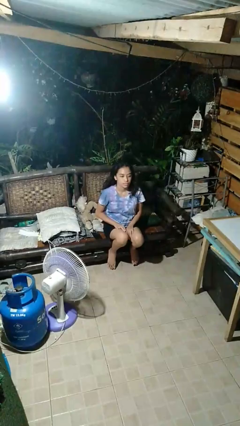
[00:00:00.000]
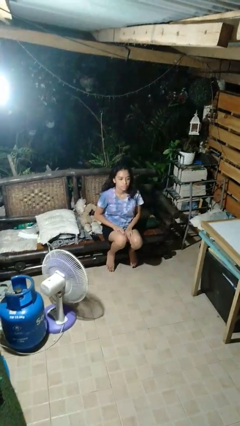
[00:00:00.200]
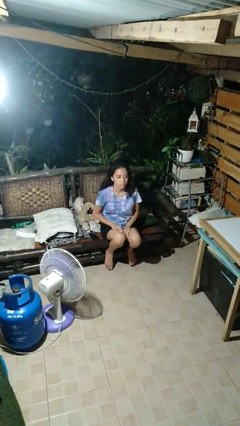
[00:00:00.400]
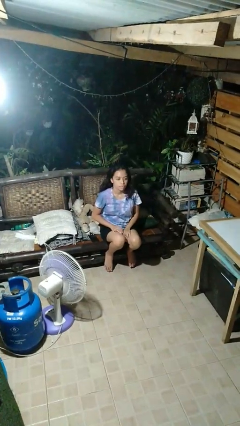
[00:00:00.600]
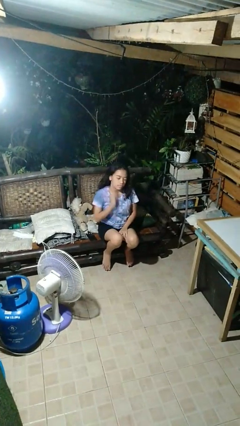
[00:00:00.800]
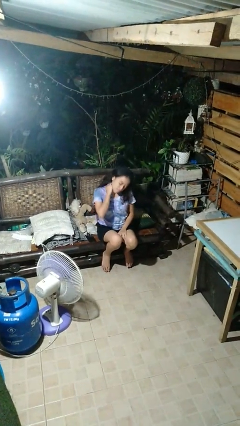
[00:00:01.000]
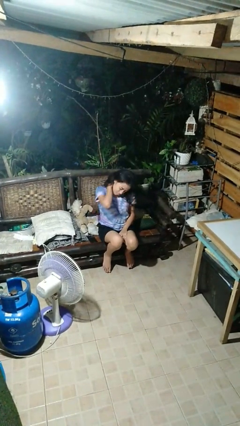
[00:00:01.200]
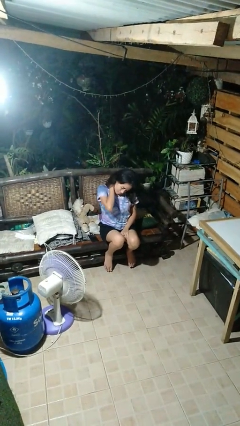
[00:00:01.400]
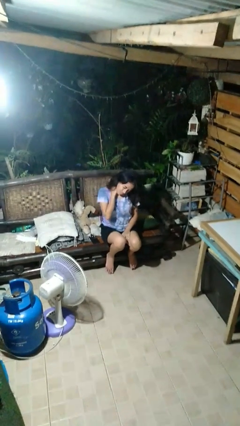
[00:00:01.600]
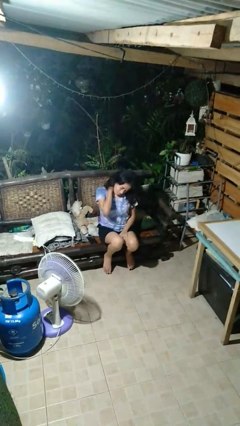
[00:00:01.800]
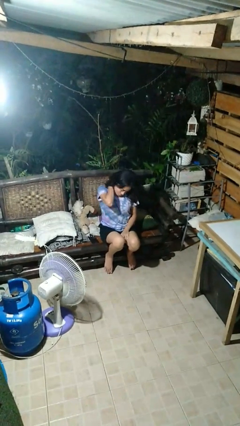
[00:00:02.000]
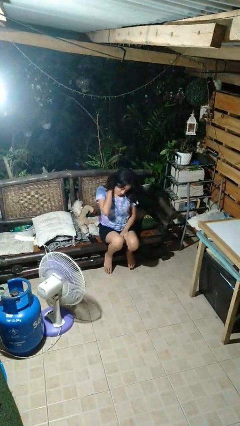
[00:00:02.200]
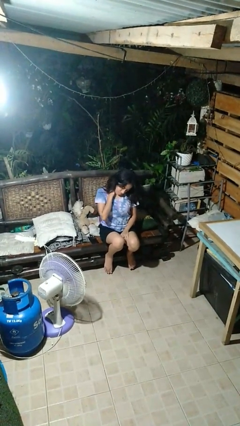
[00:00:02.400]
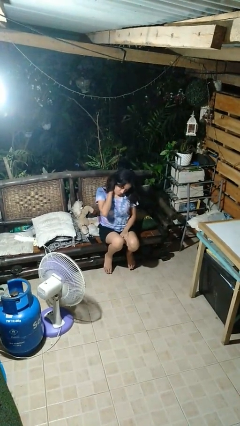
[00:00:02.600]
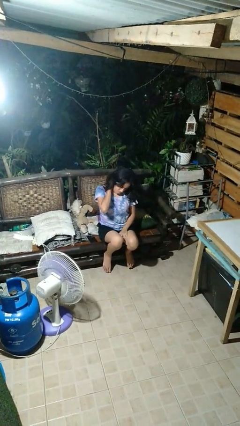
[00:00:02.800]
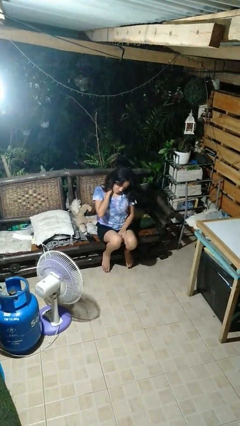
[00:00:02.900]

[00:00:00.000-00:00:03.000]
person rubs neck

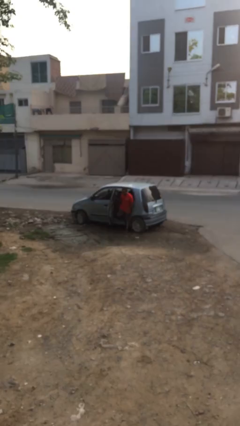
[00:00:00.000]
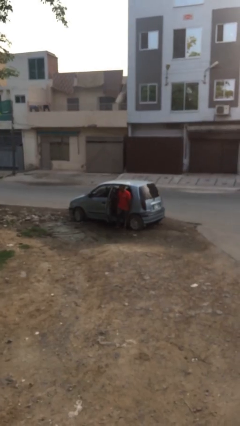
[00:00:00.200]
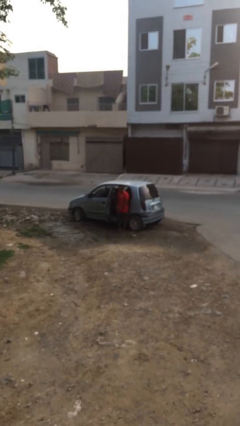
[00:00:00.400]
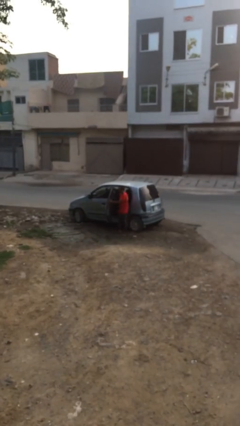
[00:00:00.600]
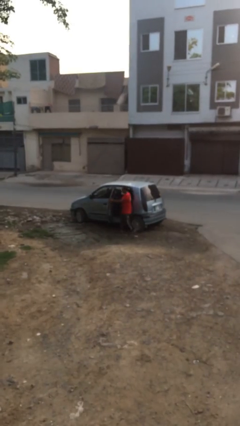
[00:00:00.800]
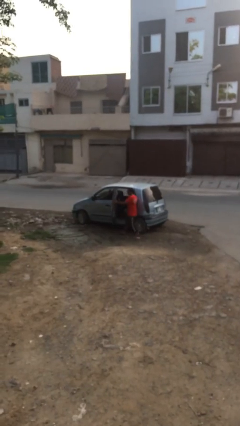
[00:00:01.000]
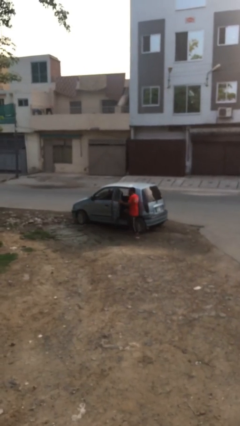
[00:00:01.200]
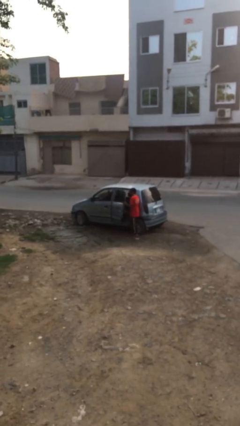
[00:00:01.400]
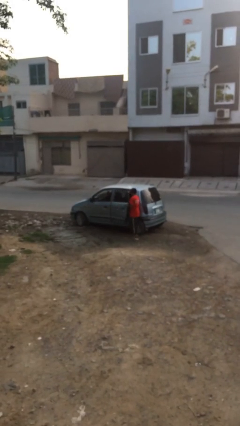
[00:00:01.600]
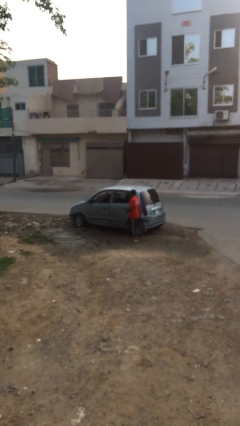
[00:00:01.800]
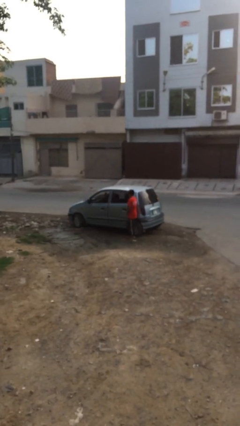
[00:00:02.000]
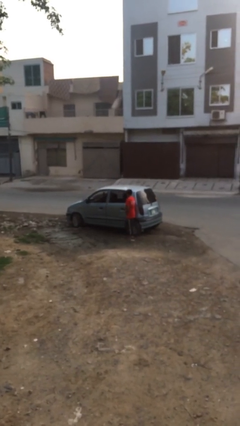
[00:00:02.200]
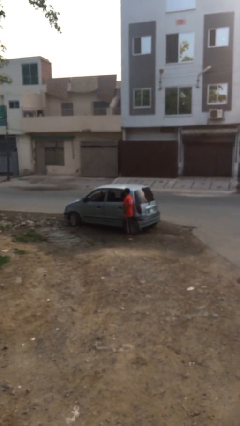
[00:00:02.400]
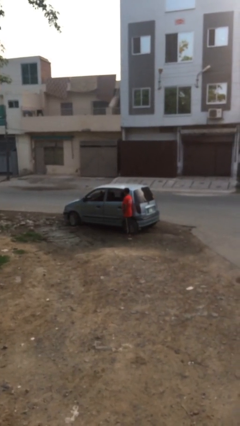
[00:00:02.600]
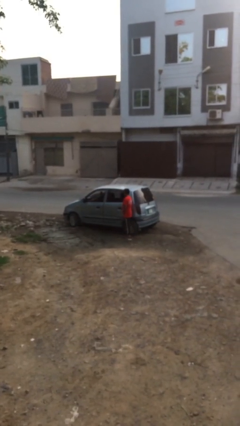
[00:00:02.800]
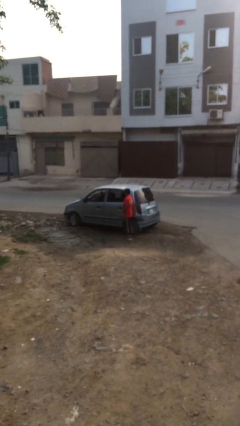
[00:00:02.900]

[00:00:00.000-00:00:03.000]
person closes car door

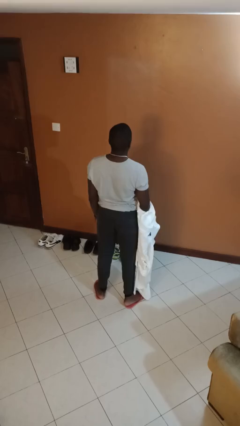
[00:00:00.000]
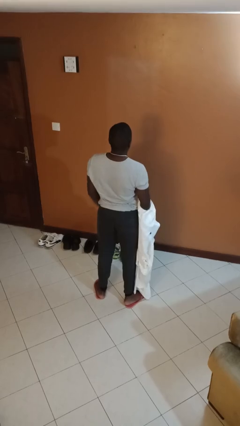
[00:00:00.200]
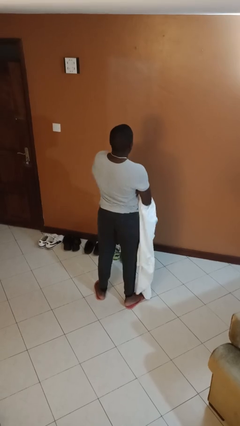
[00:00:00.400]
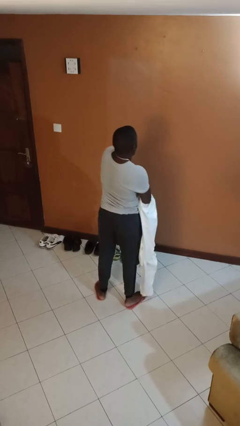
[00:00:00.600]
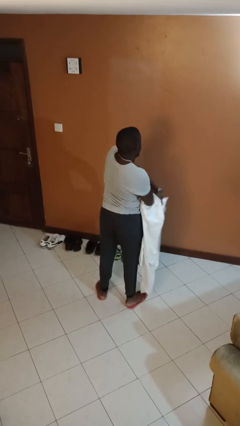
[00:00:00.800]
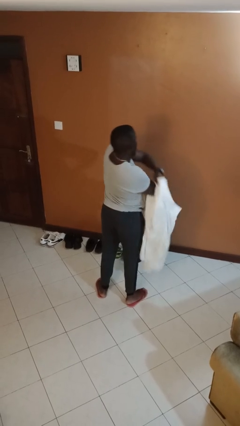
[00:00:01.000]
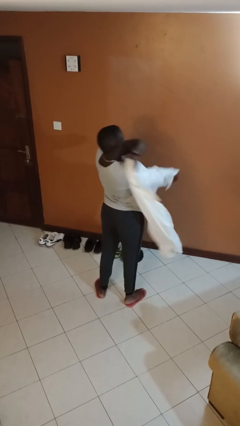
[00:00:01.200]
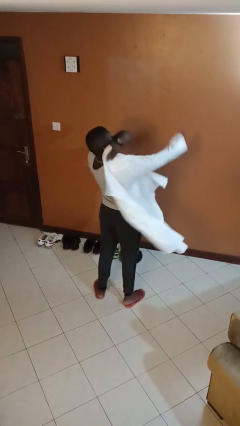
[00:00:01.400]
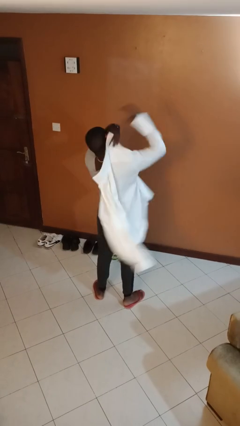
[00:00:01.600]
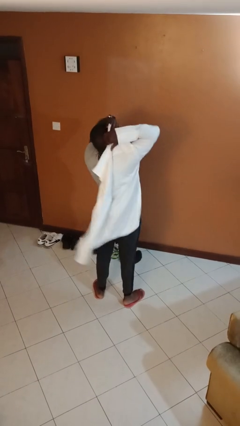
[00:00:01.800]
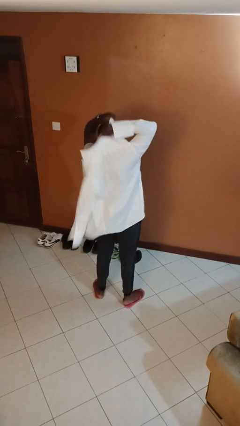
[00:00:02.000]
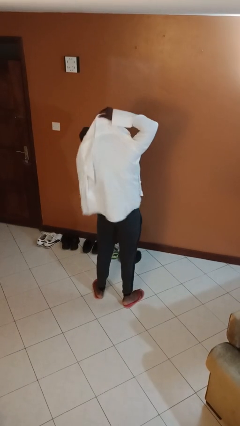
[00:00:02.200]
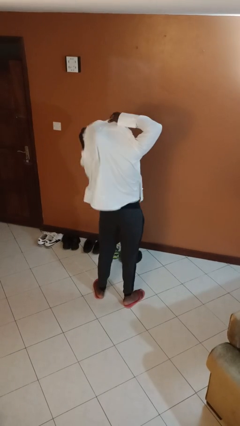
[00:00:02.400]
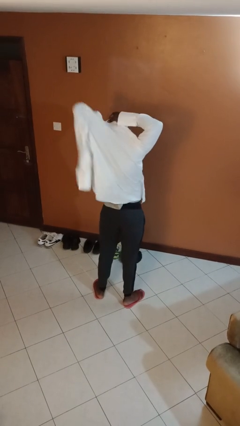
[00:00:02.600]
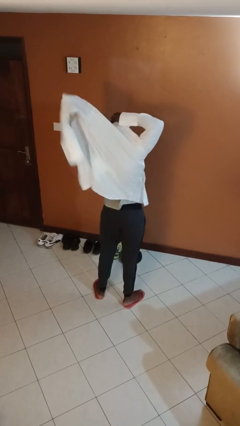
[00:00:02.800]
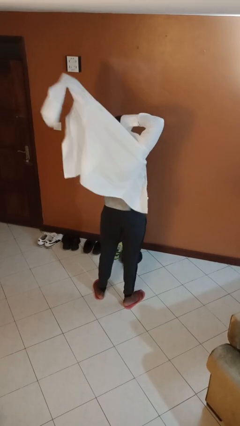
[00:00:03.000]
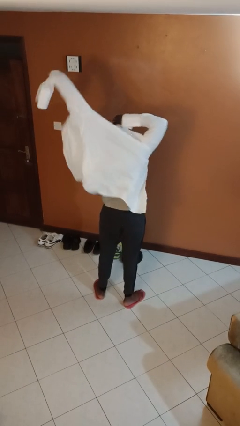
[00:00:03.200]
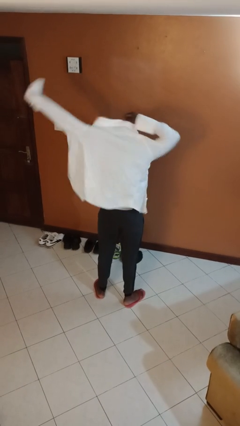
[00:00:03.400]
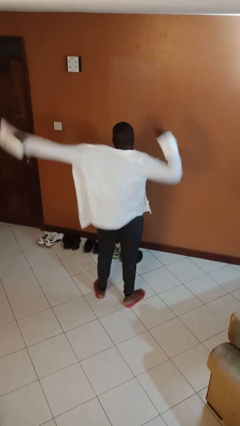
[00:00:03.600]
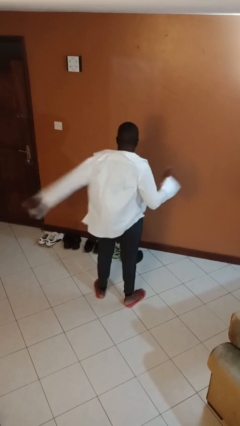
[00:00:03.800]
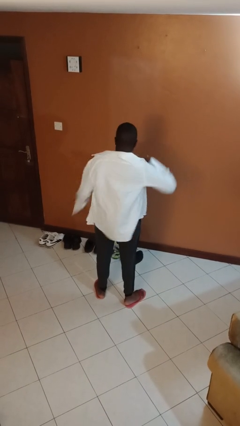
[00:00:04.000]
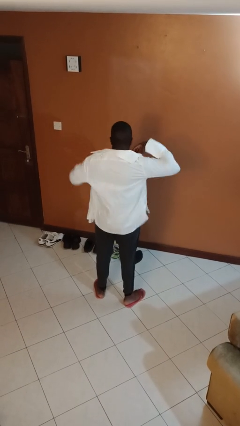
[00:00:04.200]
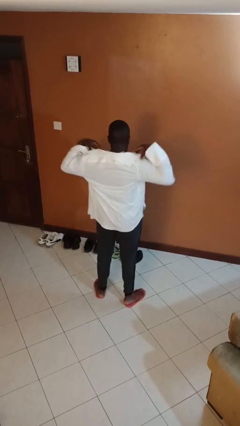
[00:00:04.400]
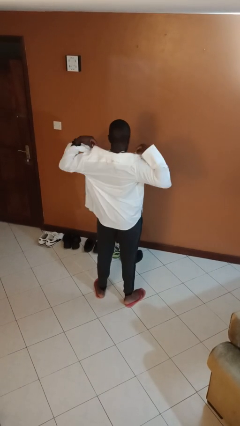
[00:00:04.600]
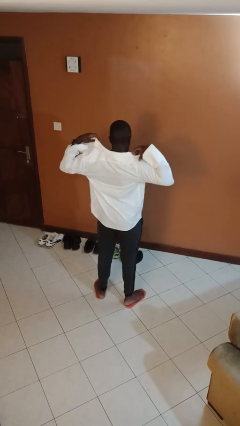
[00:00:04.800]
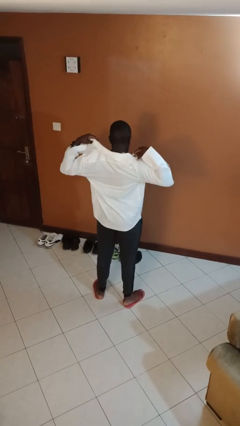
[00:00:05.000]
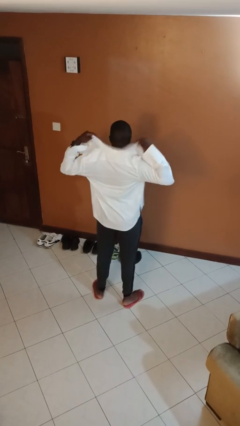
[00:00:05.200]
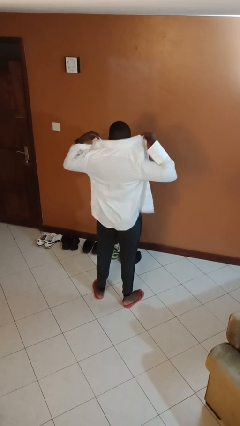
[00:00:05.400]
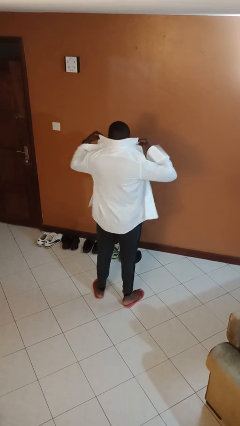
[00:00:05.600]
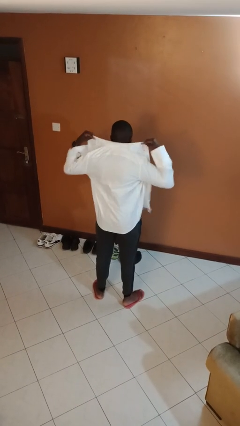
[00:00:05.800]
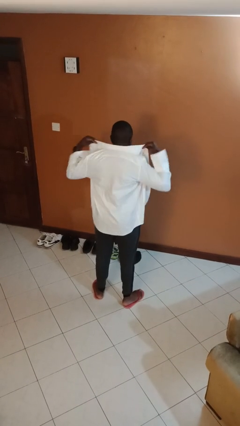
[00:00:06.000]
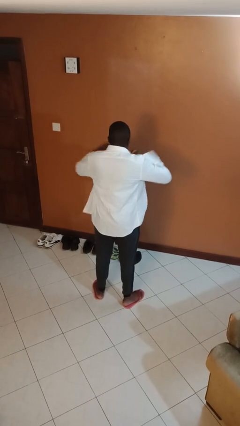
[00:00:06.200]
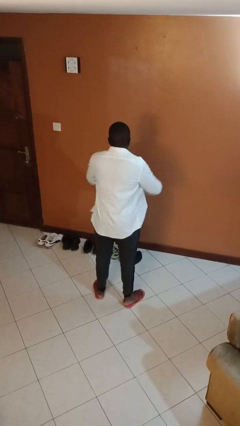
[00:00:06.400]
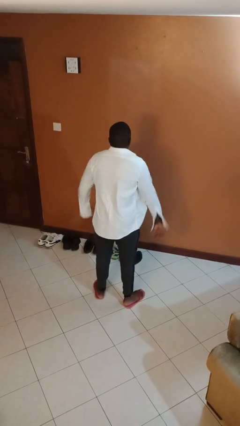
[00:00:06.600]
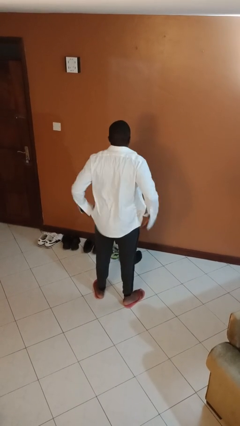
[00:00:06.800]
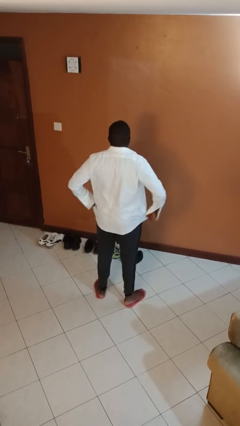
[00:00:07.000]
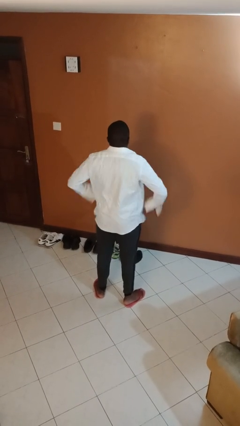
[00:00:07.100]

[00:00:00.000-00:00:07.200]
person puts on shirt

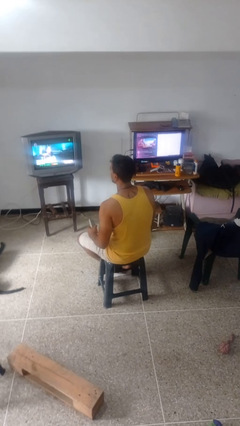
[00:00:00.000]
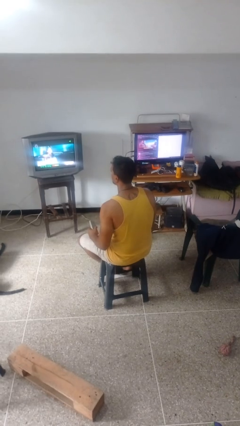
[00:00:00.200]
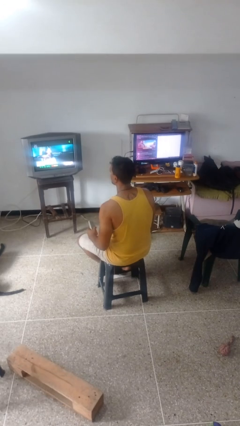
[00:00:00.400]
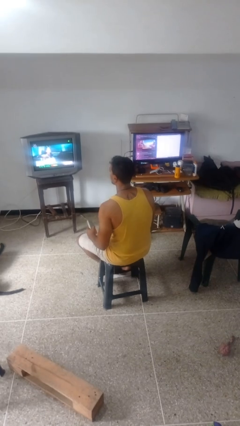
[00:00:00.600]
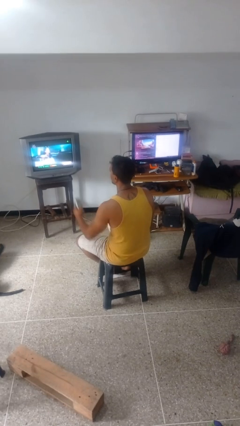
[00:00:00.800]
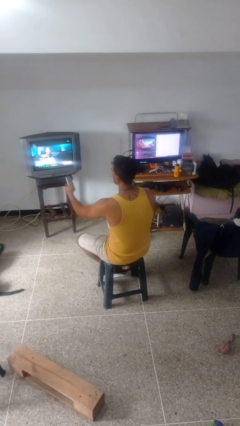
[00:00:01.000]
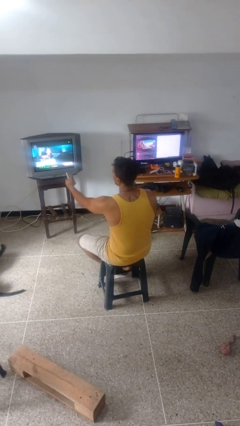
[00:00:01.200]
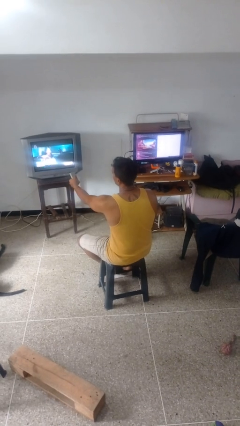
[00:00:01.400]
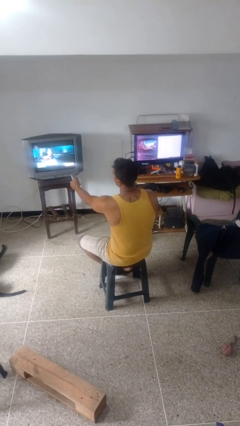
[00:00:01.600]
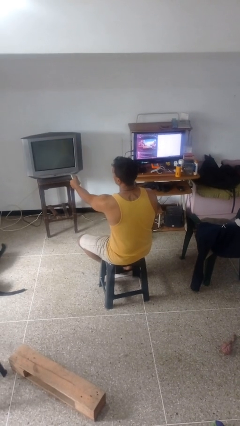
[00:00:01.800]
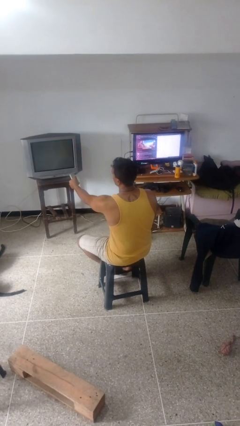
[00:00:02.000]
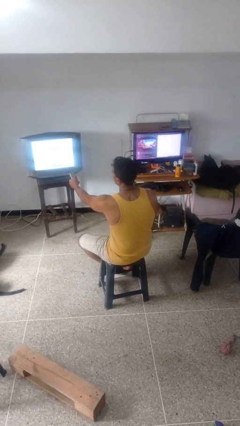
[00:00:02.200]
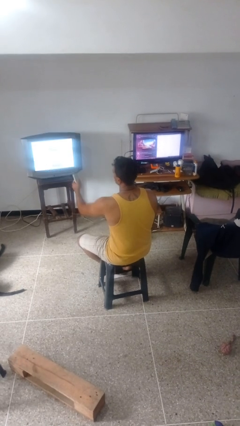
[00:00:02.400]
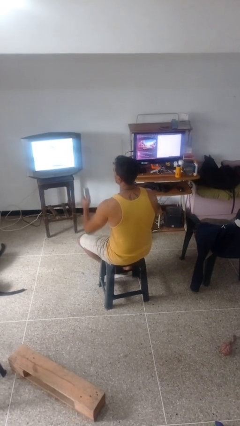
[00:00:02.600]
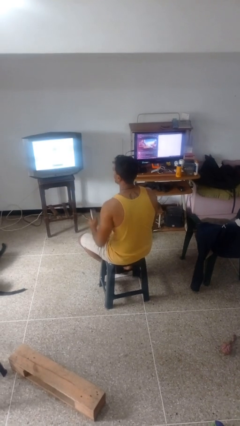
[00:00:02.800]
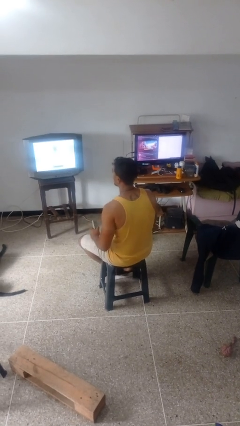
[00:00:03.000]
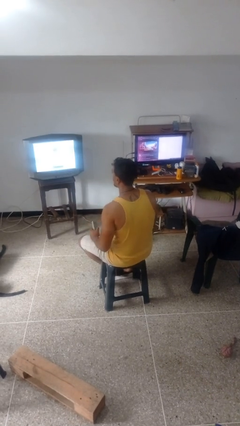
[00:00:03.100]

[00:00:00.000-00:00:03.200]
person uses television remote

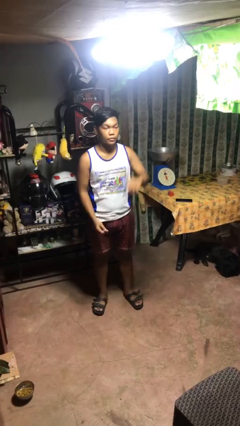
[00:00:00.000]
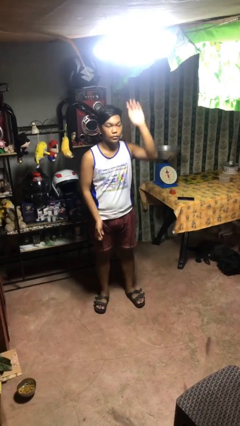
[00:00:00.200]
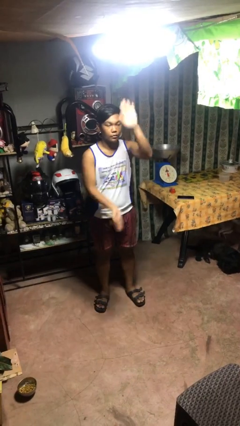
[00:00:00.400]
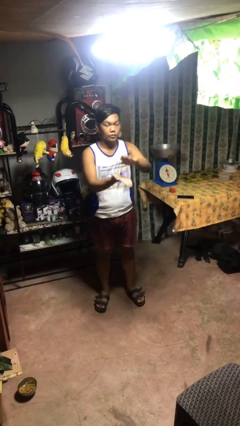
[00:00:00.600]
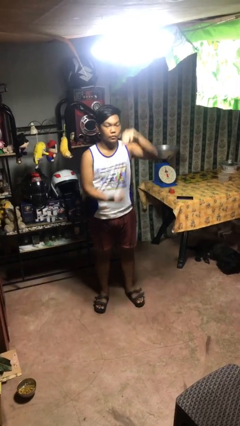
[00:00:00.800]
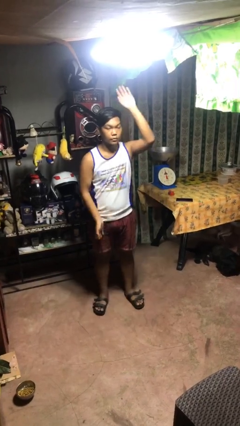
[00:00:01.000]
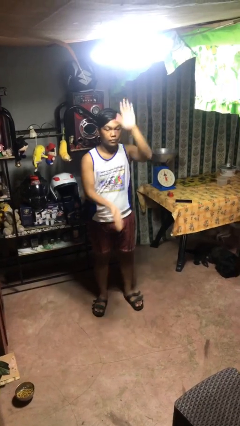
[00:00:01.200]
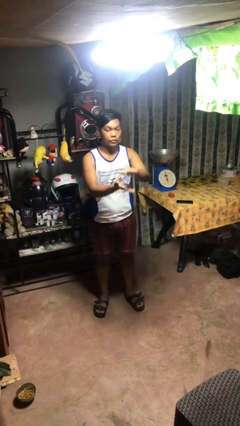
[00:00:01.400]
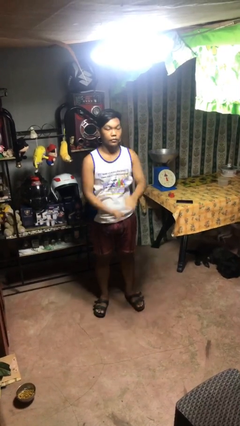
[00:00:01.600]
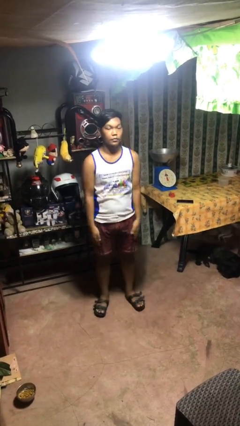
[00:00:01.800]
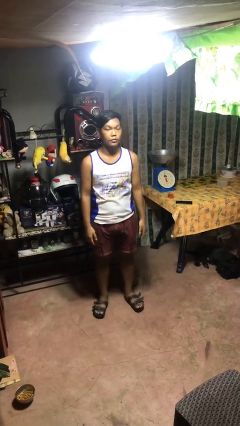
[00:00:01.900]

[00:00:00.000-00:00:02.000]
person gestures zoom out
